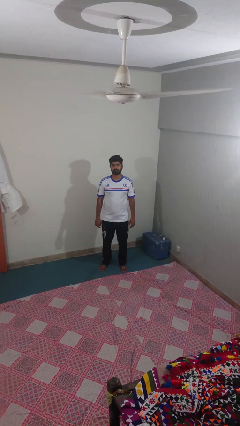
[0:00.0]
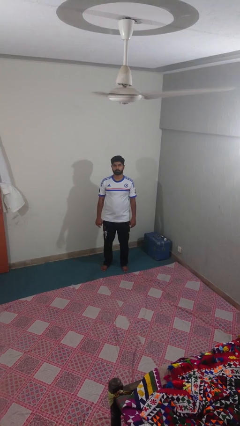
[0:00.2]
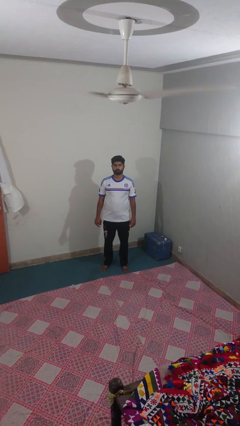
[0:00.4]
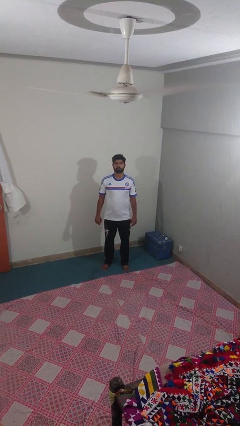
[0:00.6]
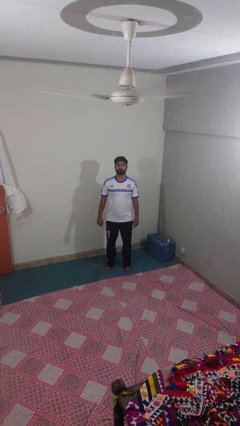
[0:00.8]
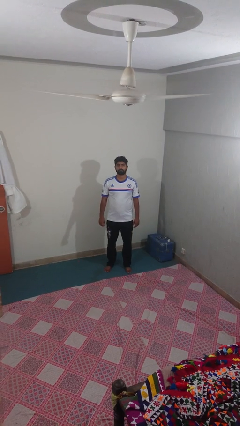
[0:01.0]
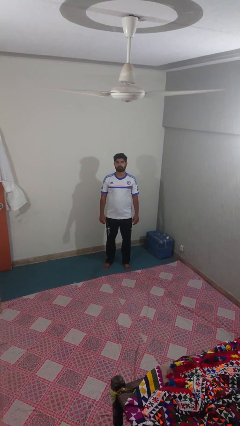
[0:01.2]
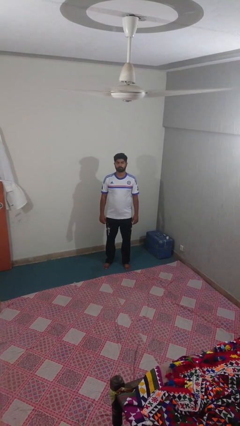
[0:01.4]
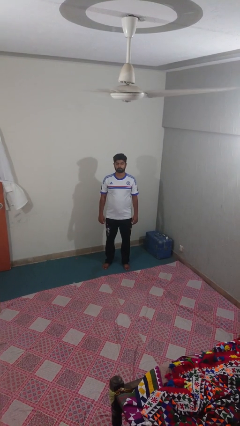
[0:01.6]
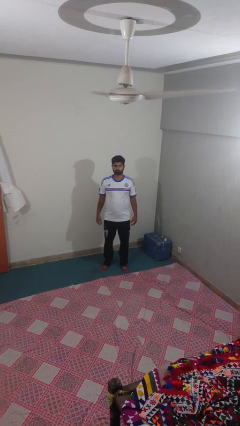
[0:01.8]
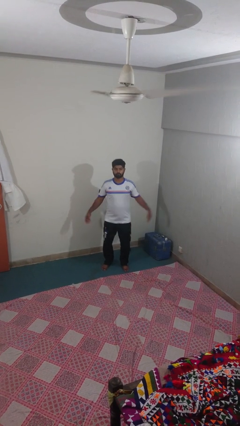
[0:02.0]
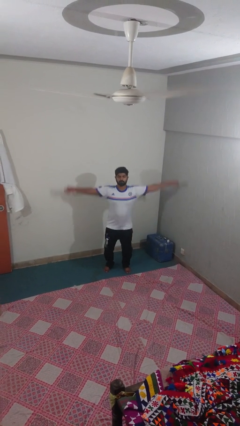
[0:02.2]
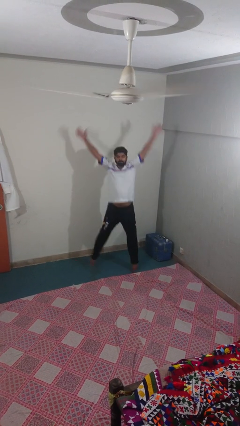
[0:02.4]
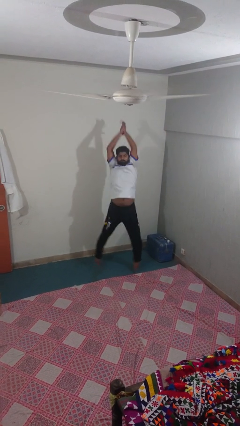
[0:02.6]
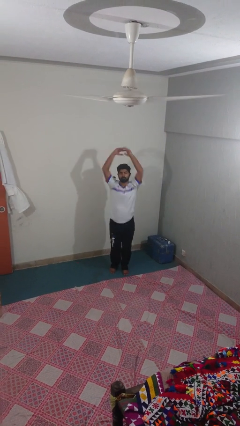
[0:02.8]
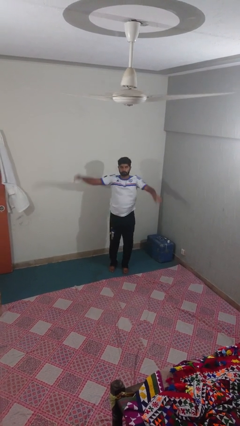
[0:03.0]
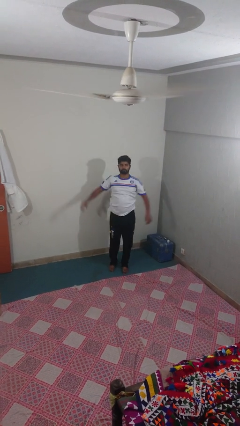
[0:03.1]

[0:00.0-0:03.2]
person exercises with jumping jacks

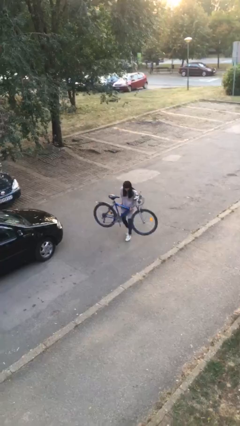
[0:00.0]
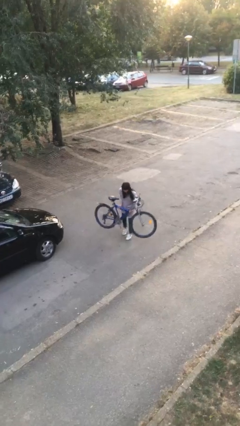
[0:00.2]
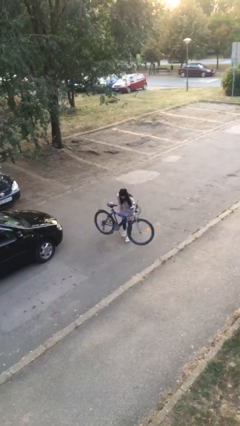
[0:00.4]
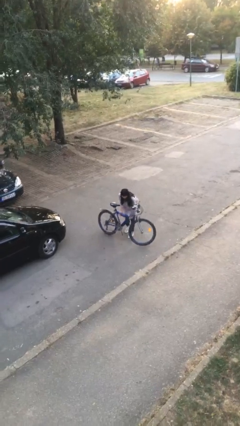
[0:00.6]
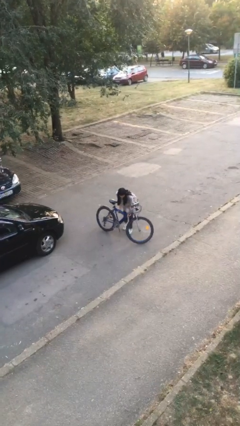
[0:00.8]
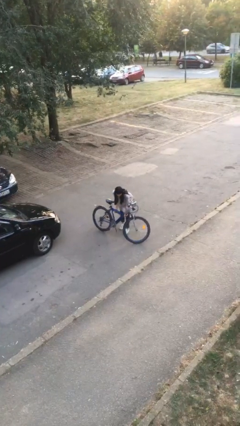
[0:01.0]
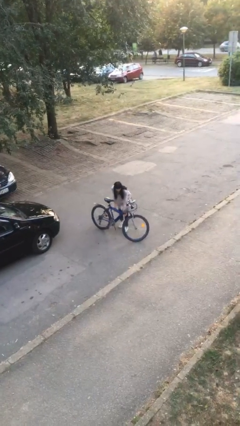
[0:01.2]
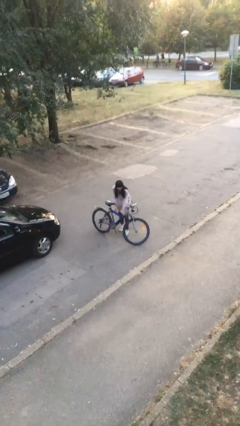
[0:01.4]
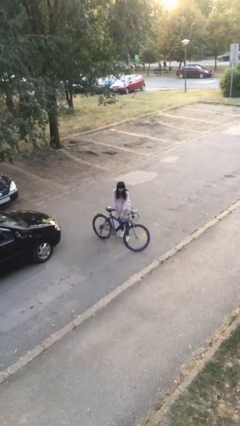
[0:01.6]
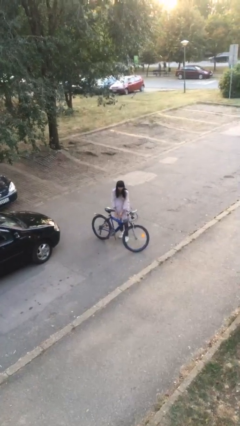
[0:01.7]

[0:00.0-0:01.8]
person puts down object on floor

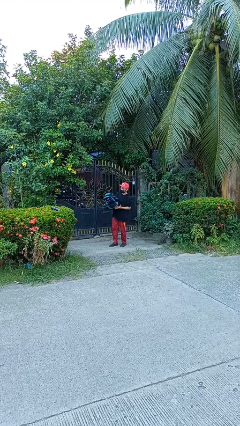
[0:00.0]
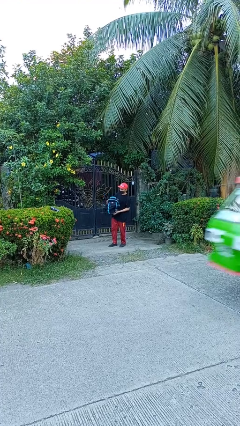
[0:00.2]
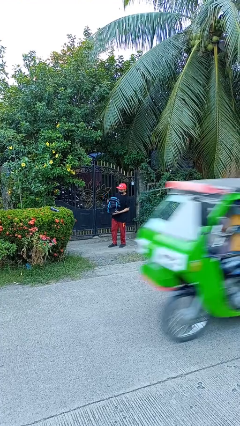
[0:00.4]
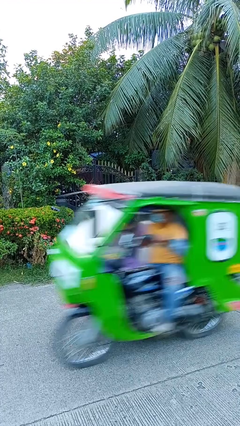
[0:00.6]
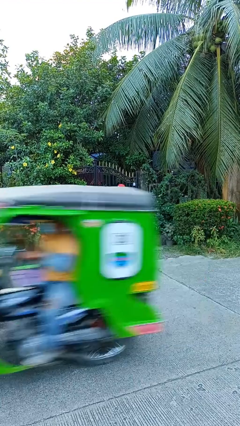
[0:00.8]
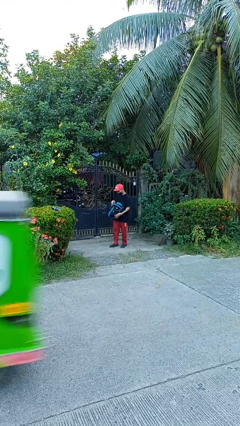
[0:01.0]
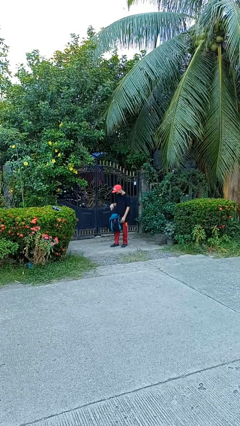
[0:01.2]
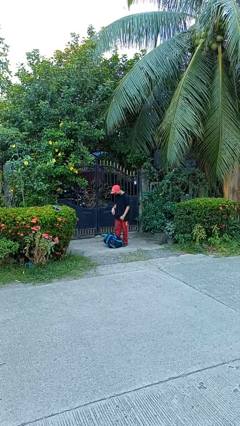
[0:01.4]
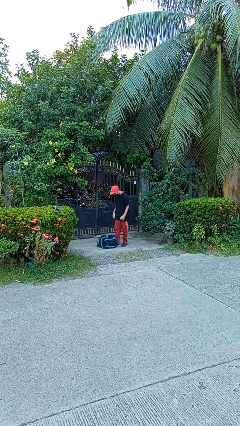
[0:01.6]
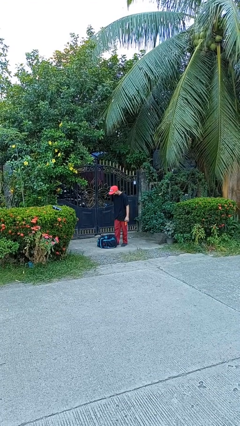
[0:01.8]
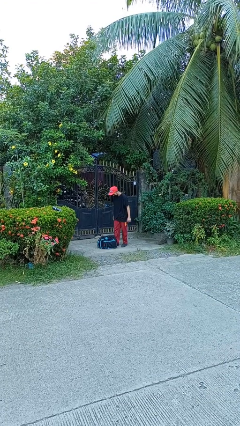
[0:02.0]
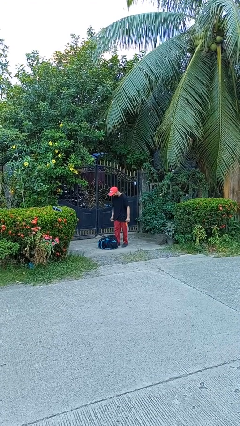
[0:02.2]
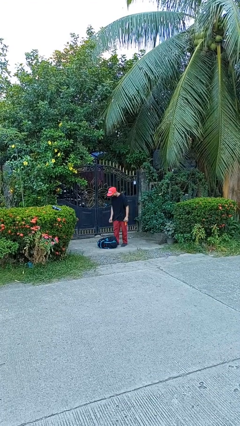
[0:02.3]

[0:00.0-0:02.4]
person drops object

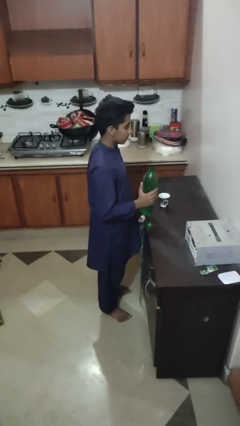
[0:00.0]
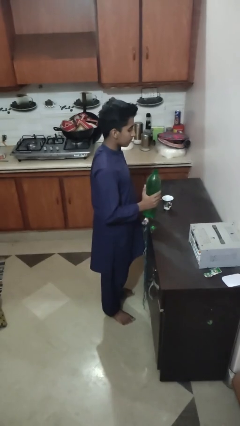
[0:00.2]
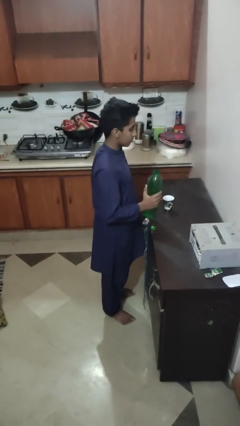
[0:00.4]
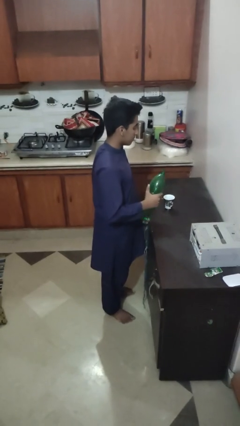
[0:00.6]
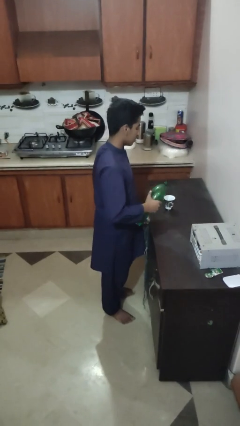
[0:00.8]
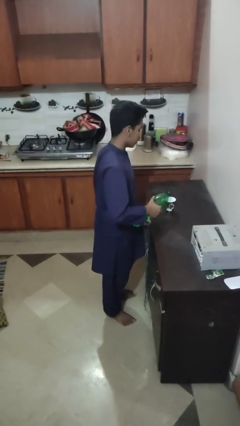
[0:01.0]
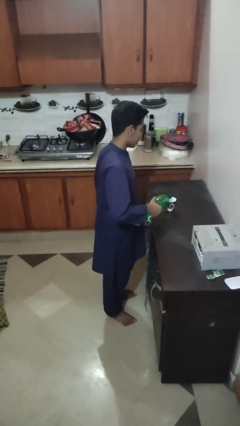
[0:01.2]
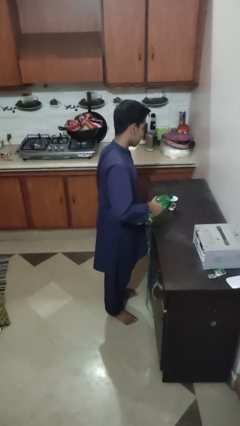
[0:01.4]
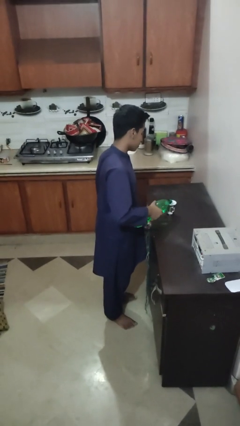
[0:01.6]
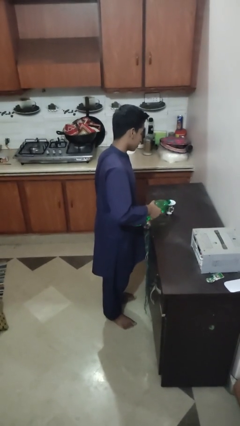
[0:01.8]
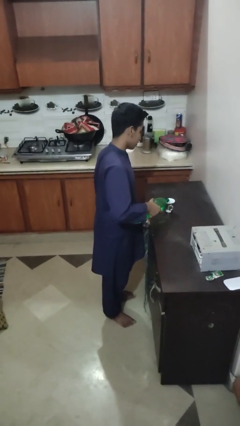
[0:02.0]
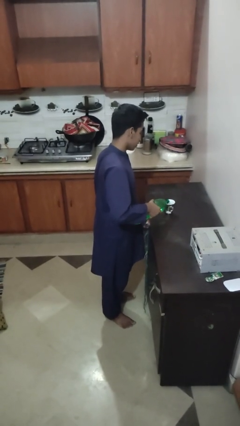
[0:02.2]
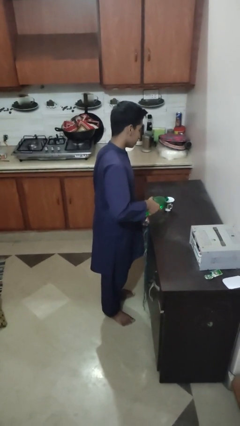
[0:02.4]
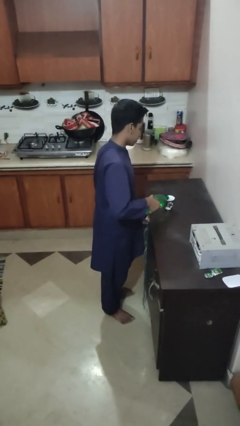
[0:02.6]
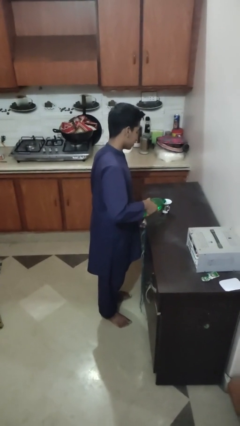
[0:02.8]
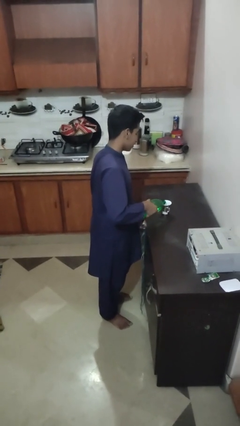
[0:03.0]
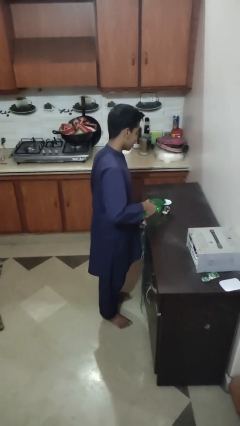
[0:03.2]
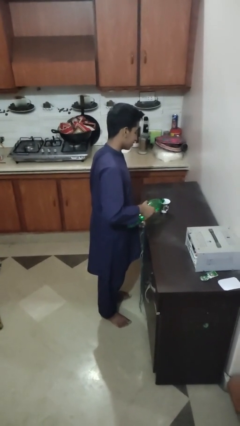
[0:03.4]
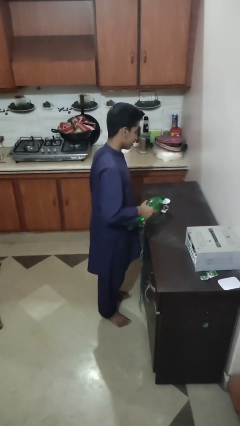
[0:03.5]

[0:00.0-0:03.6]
person pours liquid into cup

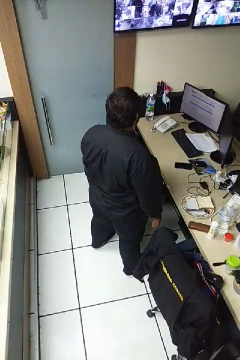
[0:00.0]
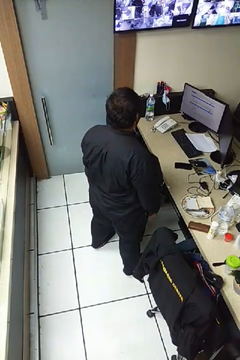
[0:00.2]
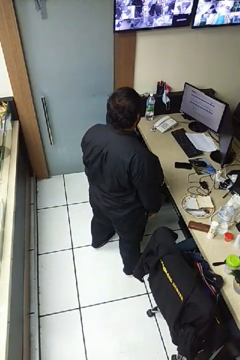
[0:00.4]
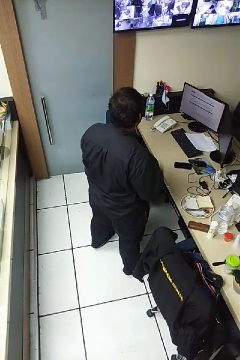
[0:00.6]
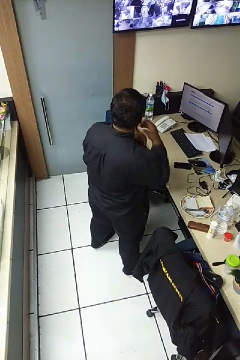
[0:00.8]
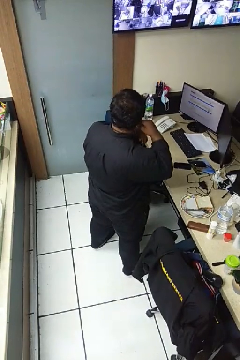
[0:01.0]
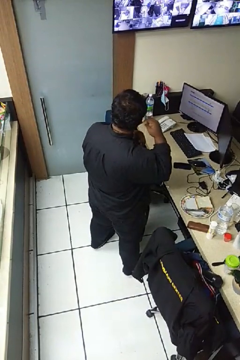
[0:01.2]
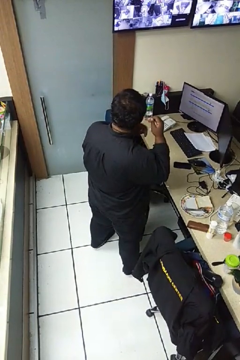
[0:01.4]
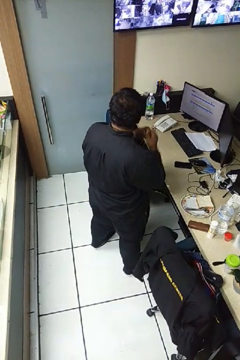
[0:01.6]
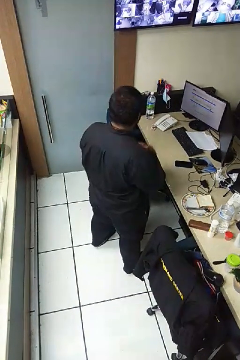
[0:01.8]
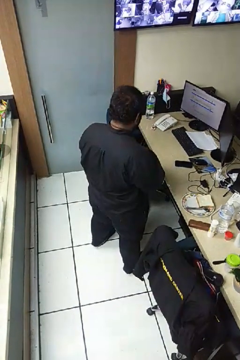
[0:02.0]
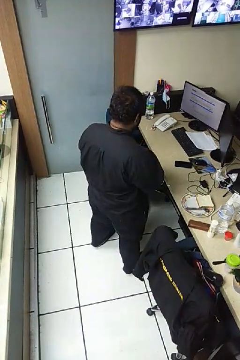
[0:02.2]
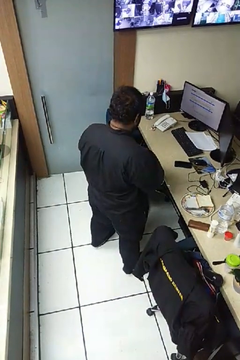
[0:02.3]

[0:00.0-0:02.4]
person takes off earrings

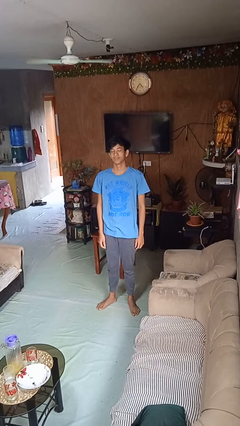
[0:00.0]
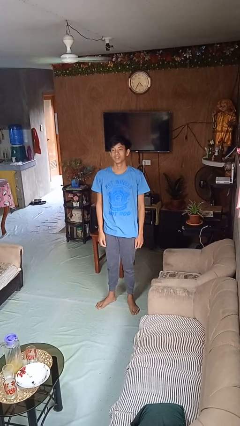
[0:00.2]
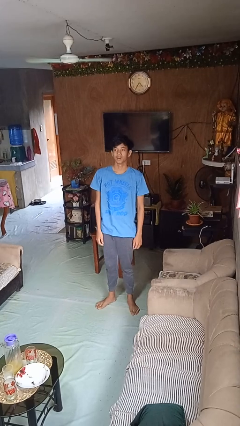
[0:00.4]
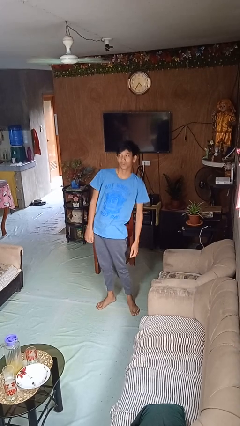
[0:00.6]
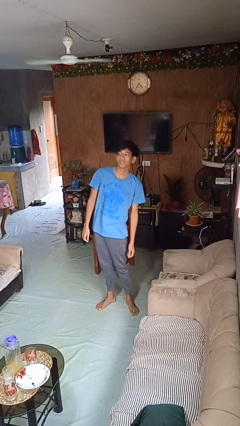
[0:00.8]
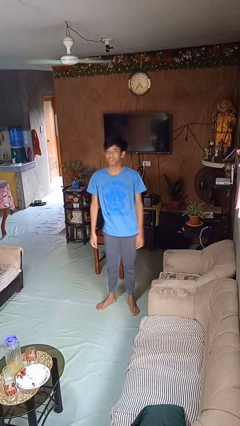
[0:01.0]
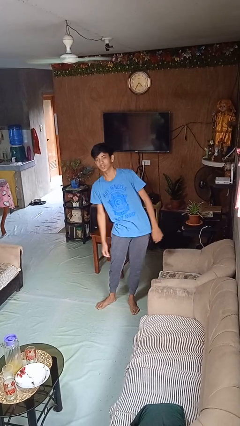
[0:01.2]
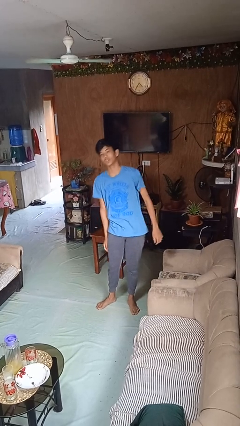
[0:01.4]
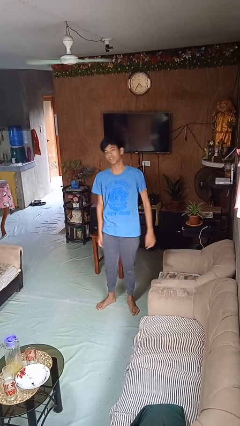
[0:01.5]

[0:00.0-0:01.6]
person dances in place

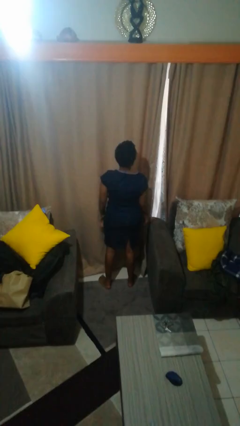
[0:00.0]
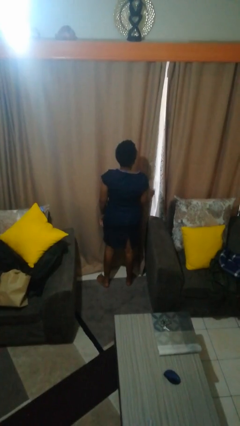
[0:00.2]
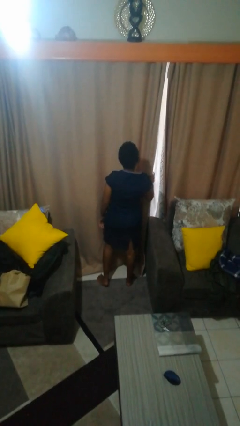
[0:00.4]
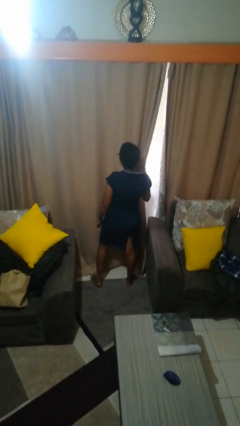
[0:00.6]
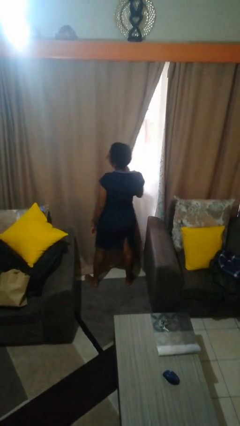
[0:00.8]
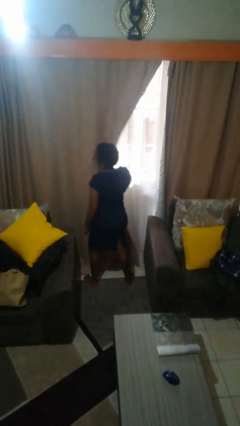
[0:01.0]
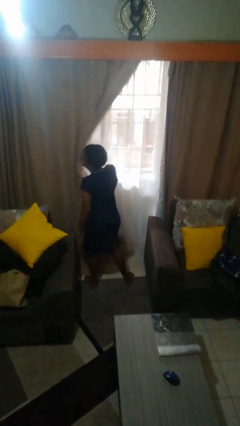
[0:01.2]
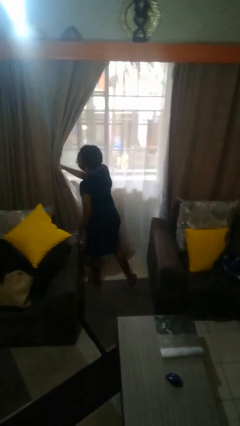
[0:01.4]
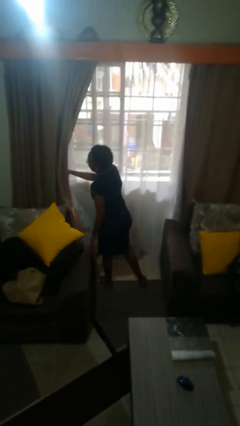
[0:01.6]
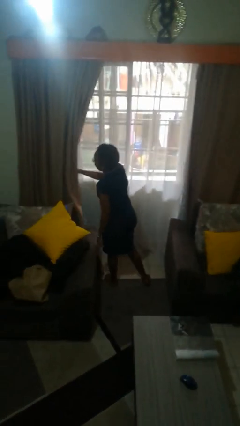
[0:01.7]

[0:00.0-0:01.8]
person opens curtains

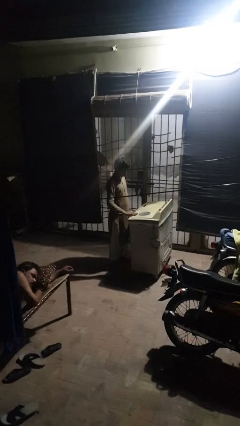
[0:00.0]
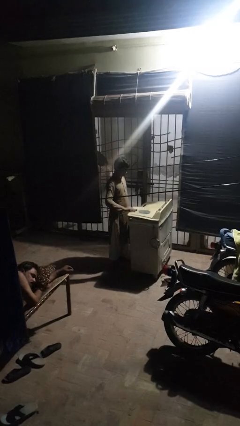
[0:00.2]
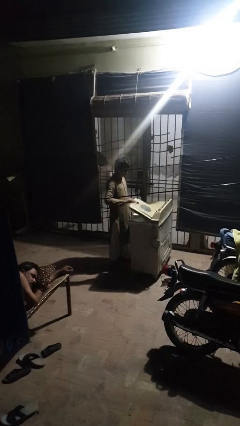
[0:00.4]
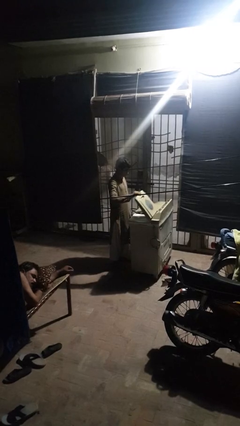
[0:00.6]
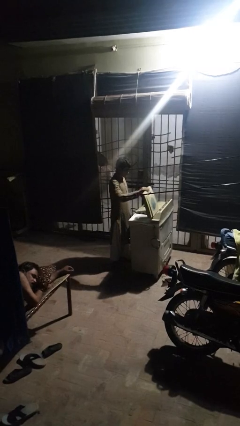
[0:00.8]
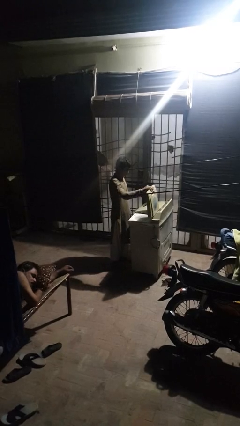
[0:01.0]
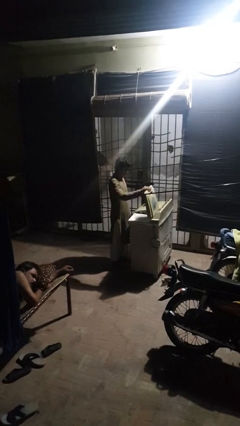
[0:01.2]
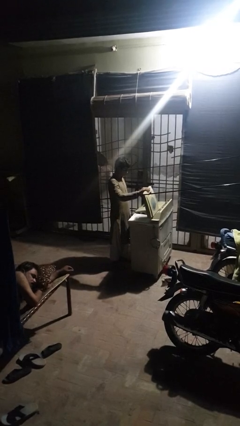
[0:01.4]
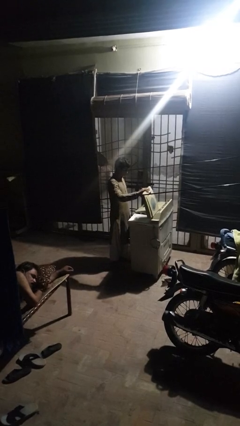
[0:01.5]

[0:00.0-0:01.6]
person opens clothes washer
